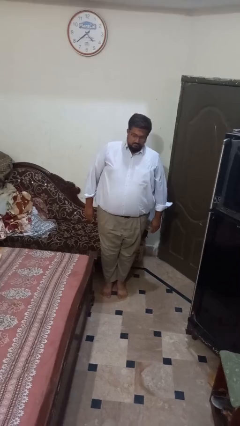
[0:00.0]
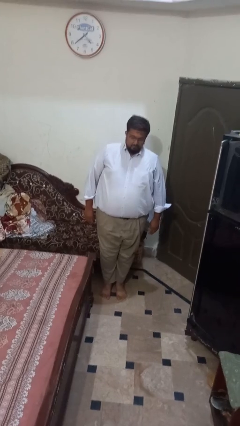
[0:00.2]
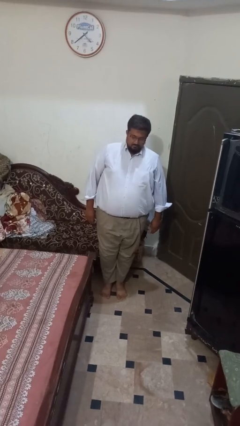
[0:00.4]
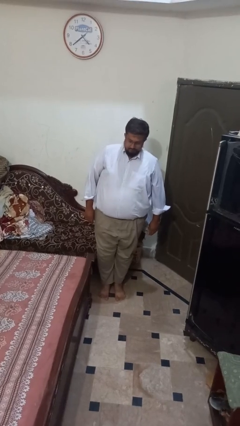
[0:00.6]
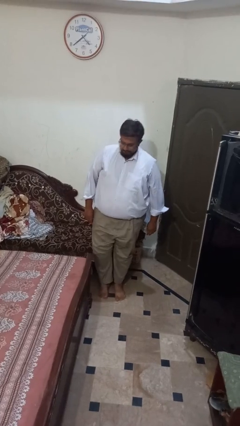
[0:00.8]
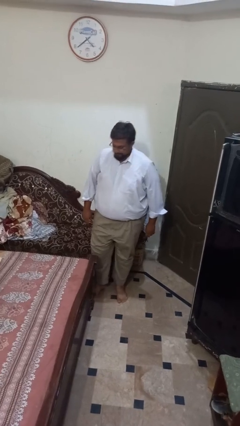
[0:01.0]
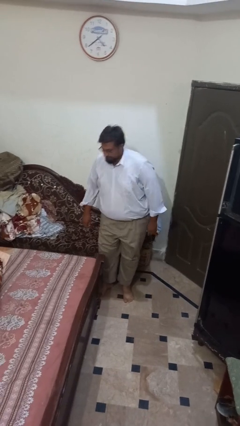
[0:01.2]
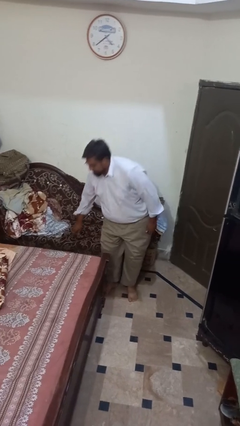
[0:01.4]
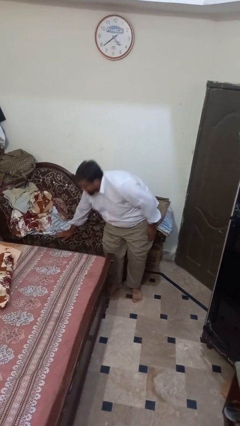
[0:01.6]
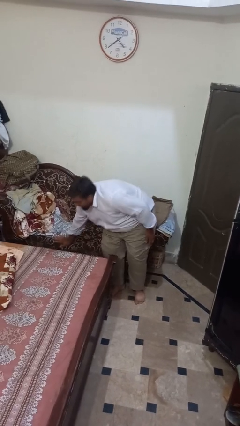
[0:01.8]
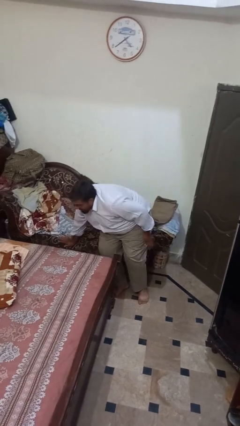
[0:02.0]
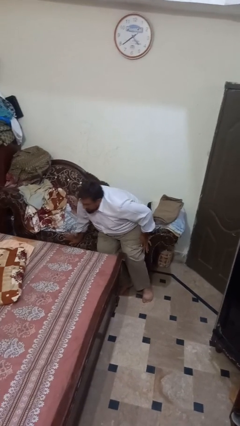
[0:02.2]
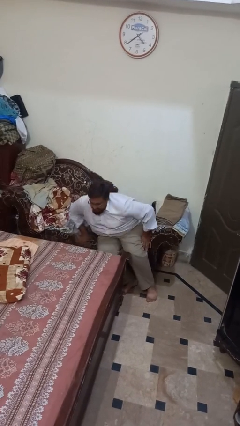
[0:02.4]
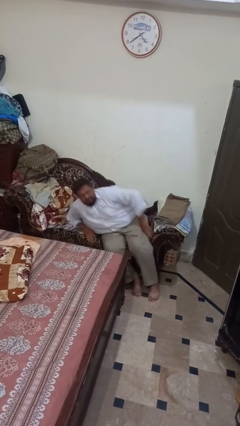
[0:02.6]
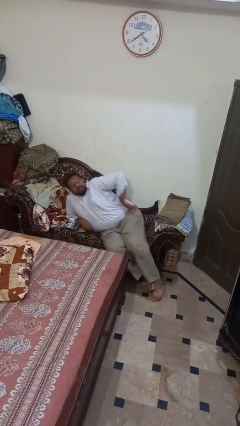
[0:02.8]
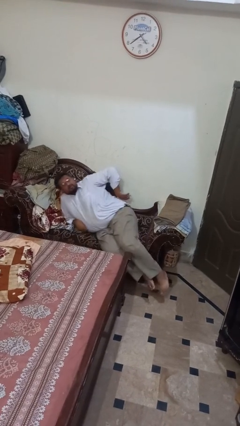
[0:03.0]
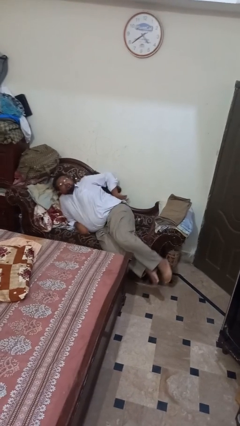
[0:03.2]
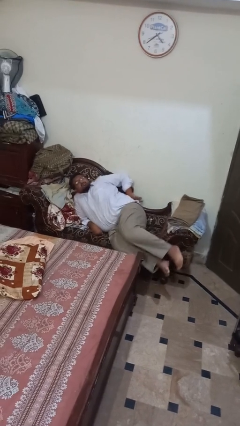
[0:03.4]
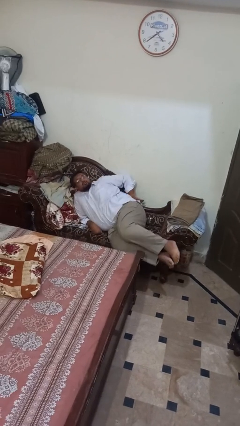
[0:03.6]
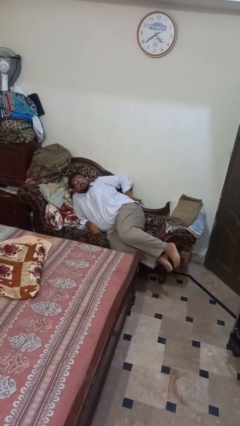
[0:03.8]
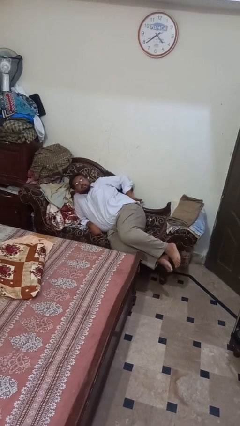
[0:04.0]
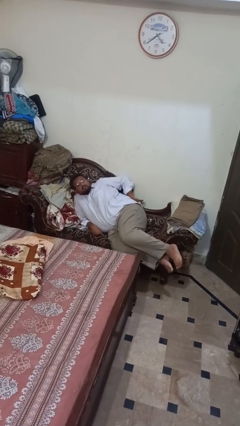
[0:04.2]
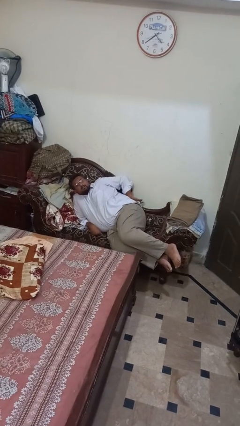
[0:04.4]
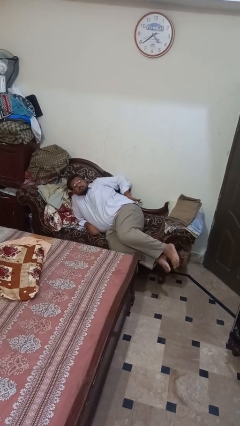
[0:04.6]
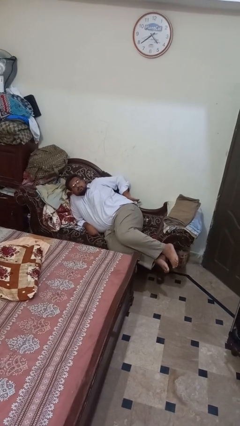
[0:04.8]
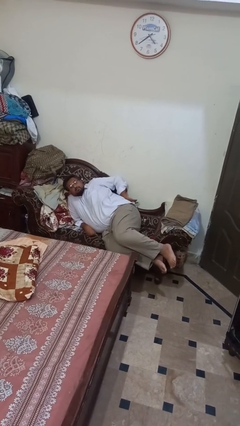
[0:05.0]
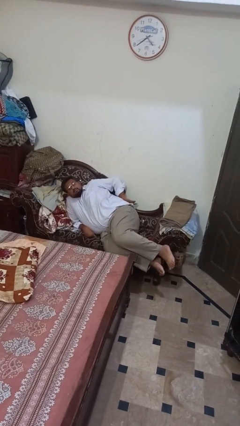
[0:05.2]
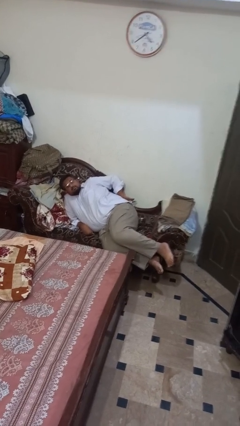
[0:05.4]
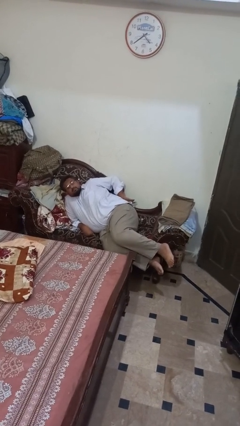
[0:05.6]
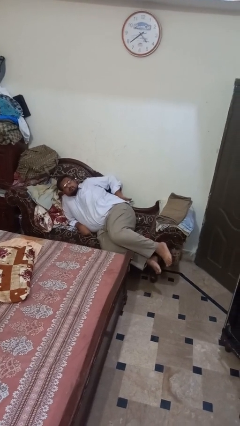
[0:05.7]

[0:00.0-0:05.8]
person lies down on couch

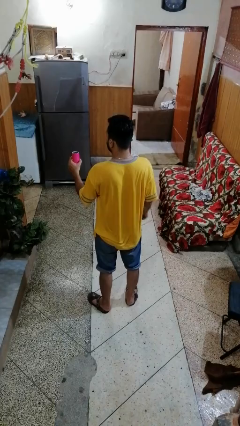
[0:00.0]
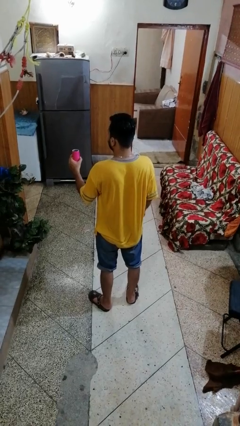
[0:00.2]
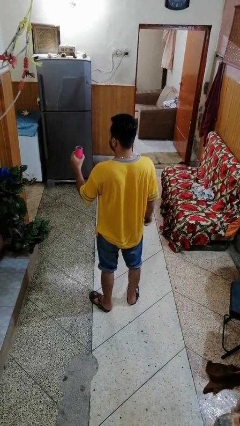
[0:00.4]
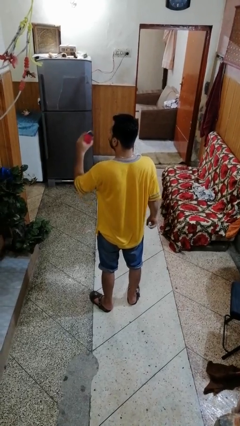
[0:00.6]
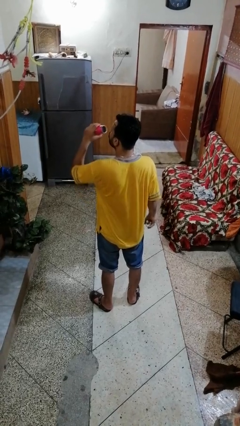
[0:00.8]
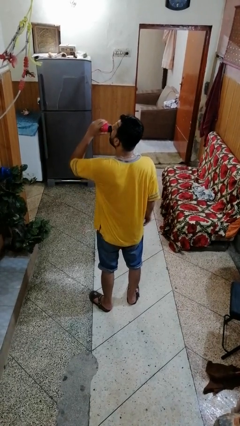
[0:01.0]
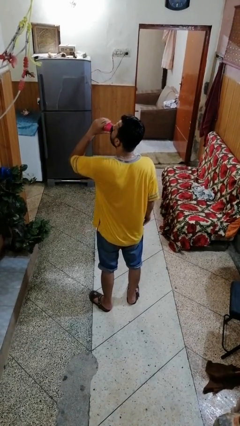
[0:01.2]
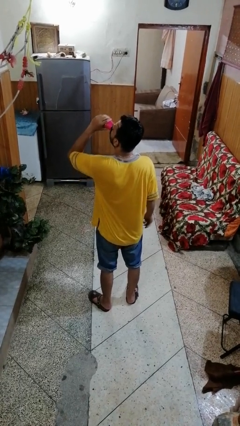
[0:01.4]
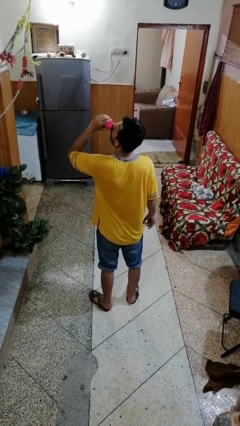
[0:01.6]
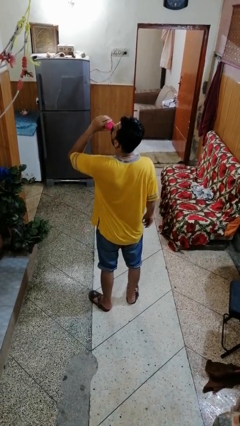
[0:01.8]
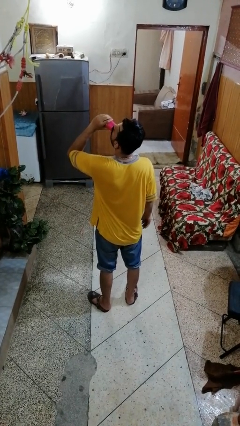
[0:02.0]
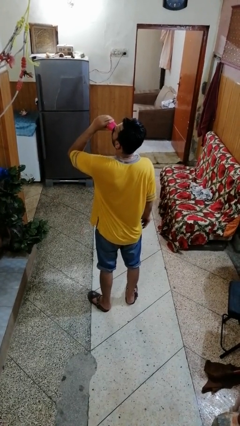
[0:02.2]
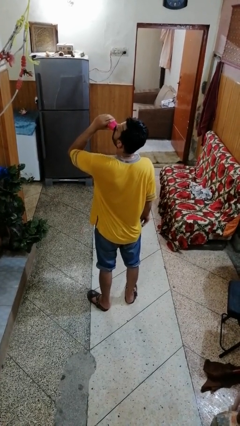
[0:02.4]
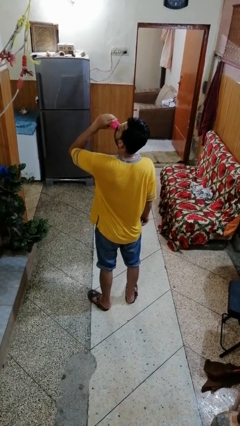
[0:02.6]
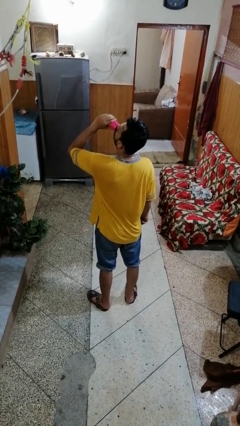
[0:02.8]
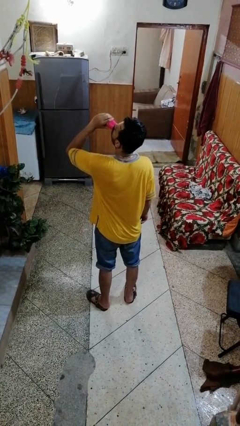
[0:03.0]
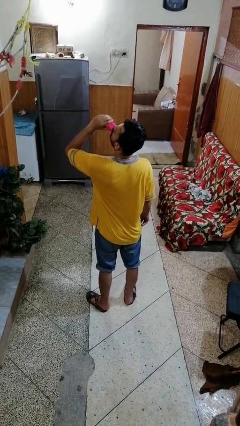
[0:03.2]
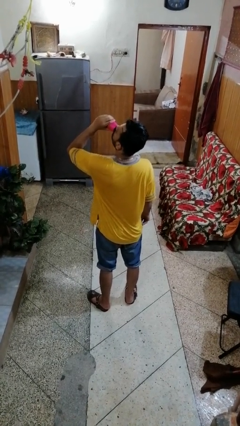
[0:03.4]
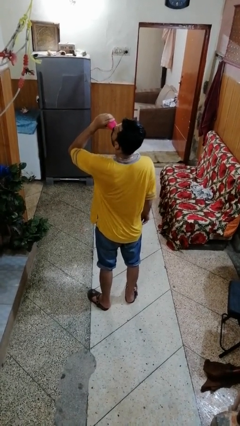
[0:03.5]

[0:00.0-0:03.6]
person drinks from beverage can

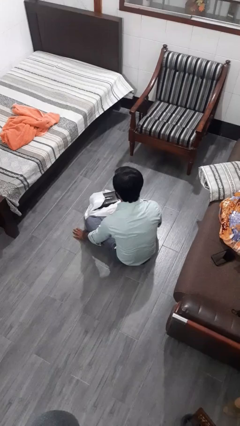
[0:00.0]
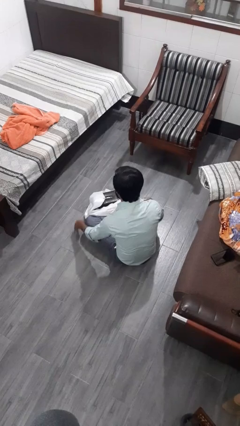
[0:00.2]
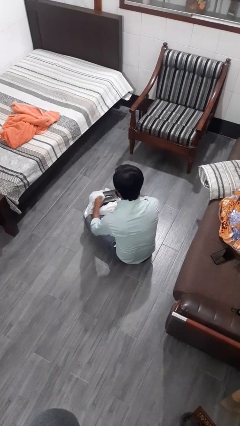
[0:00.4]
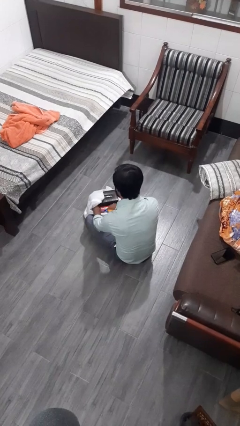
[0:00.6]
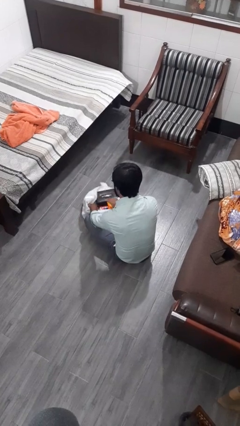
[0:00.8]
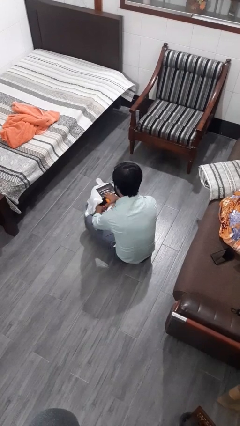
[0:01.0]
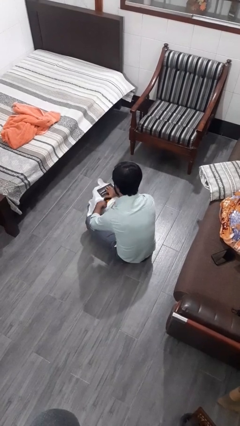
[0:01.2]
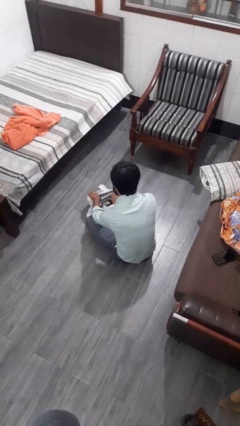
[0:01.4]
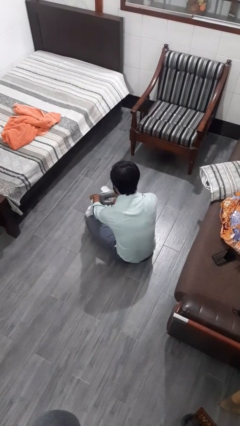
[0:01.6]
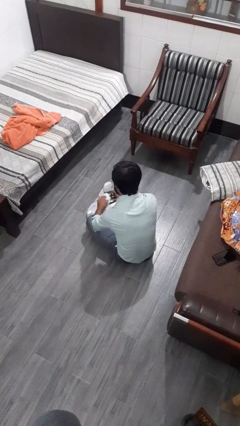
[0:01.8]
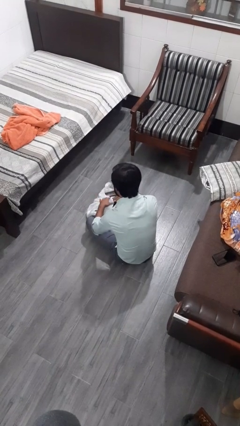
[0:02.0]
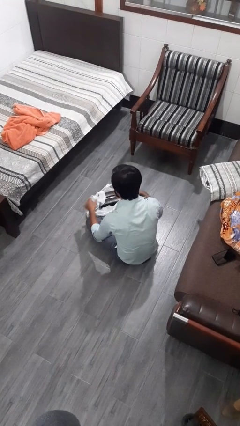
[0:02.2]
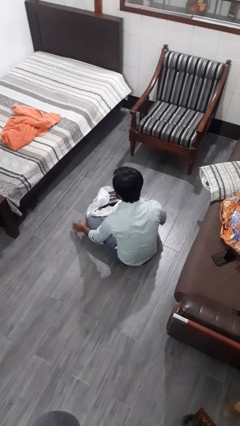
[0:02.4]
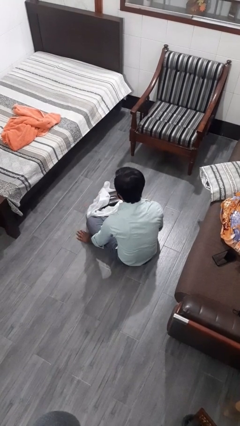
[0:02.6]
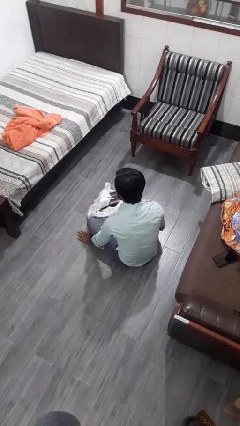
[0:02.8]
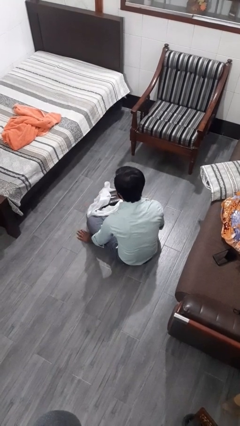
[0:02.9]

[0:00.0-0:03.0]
person searches in bag

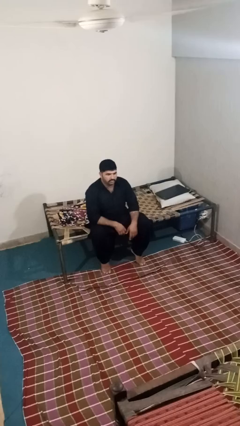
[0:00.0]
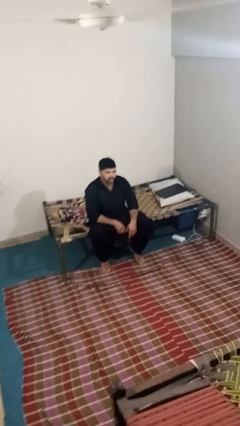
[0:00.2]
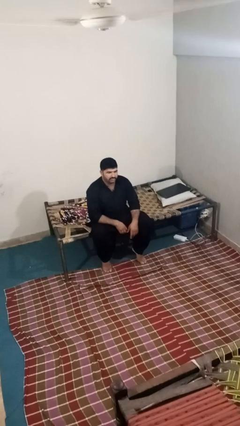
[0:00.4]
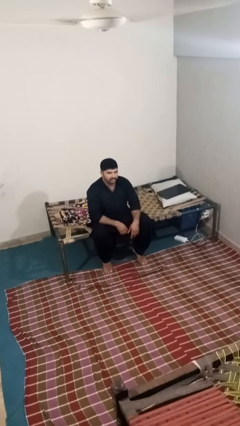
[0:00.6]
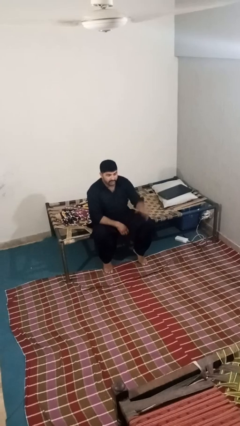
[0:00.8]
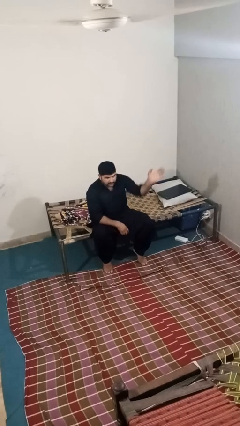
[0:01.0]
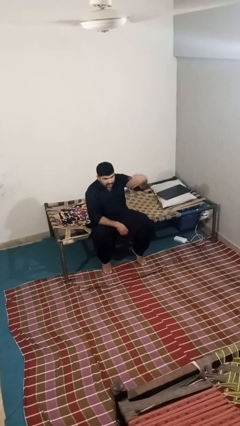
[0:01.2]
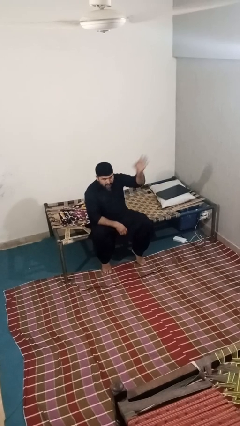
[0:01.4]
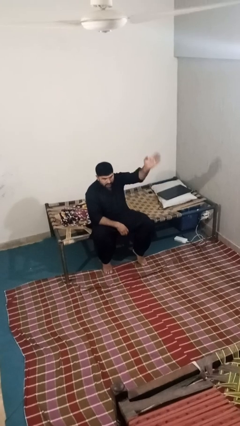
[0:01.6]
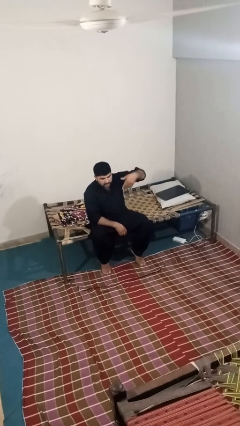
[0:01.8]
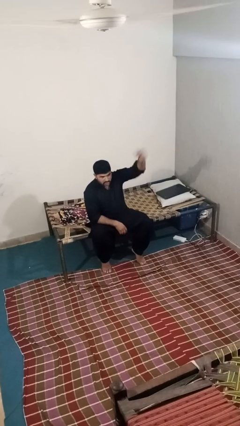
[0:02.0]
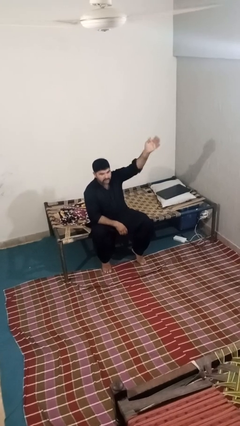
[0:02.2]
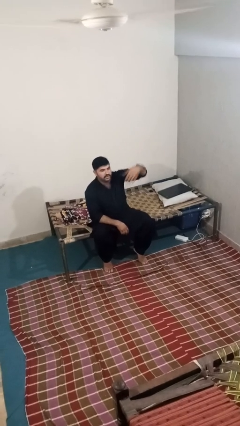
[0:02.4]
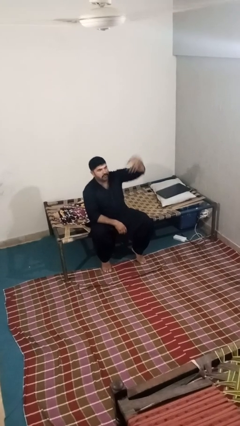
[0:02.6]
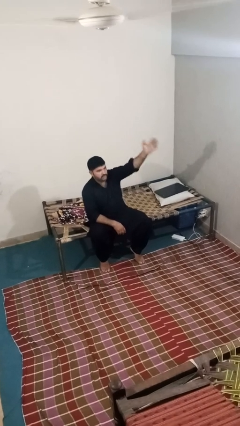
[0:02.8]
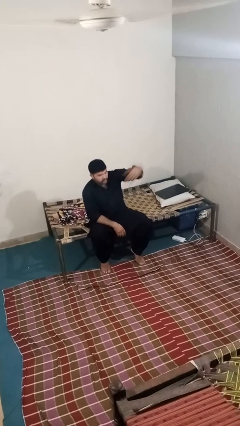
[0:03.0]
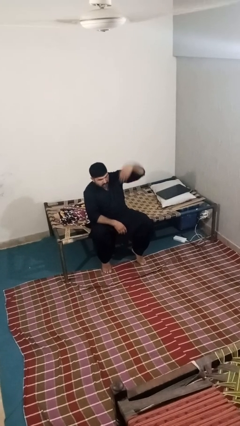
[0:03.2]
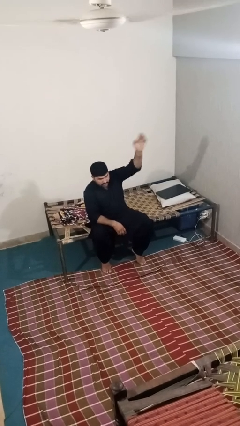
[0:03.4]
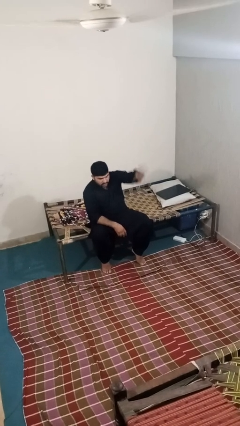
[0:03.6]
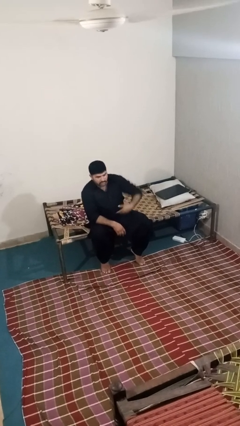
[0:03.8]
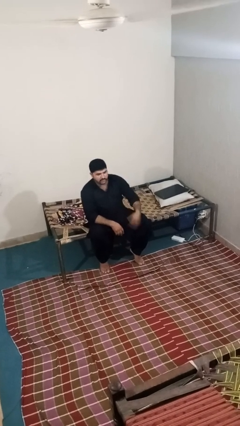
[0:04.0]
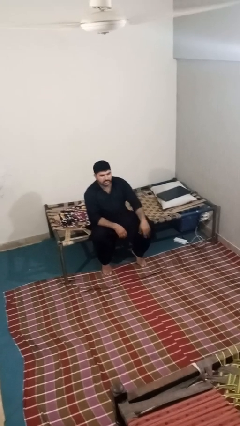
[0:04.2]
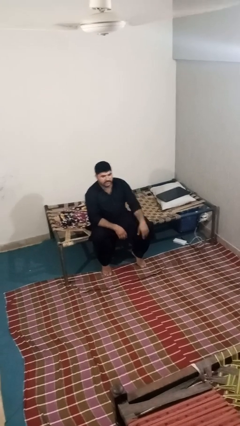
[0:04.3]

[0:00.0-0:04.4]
person gestures come here

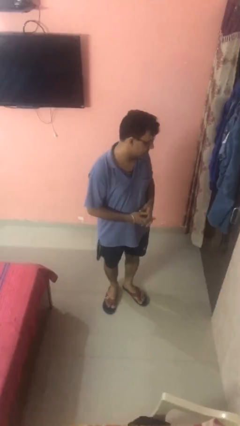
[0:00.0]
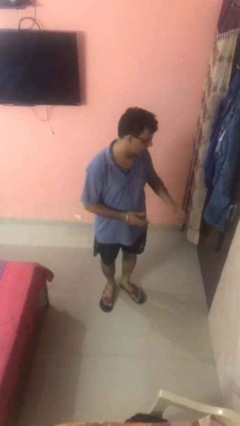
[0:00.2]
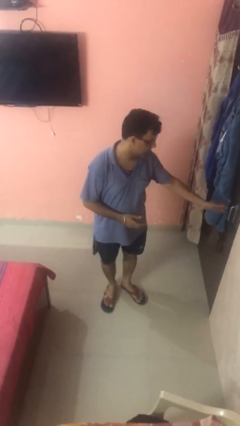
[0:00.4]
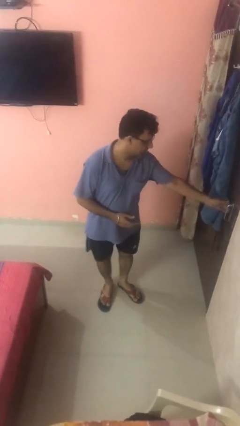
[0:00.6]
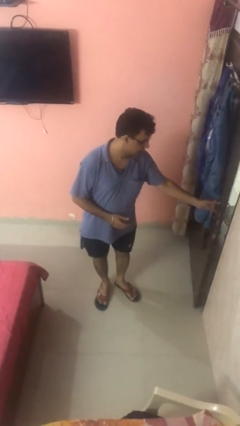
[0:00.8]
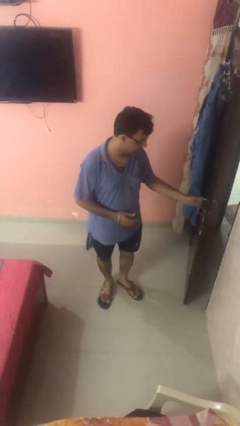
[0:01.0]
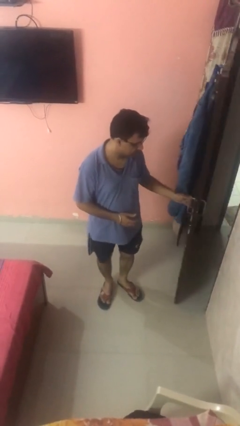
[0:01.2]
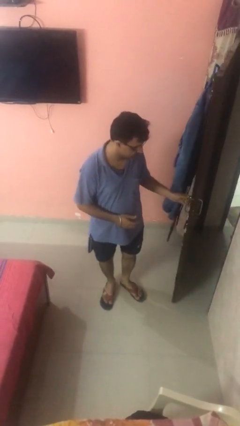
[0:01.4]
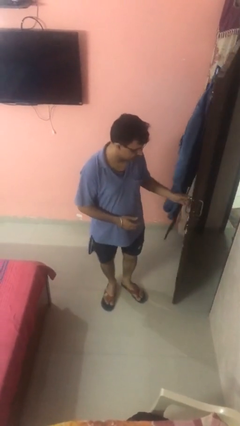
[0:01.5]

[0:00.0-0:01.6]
person opens facility door
